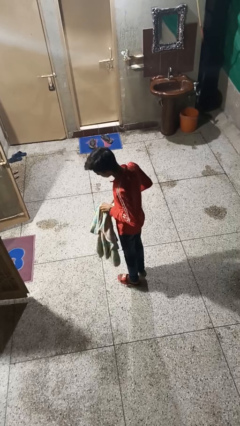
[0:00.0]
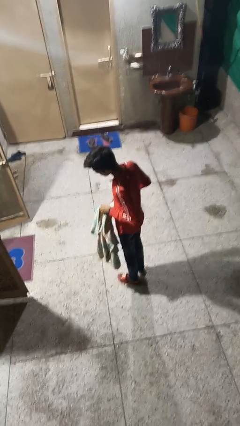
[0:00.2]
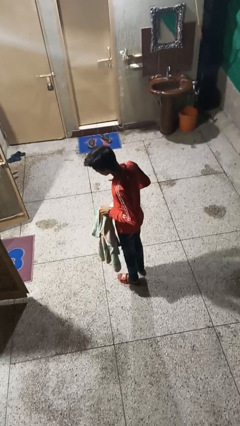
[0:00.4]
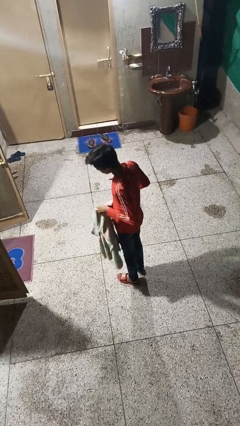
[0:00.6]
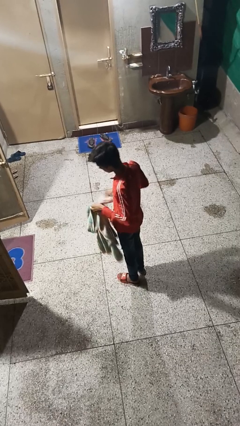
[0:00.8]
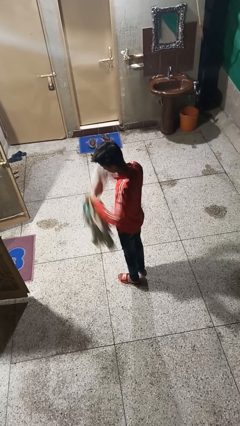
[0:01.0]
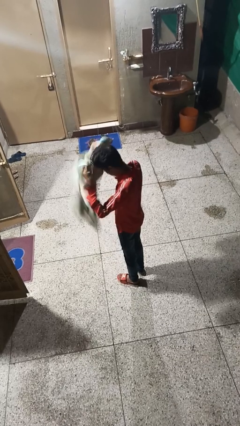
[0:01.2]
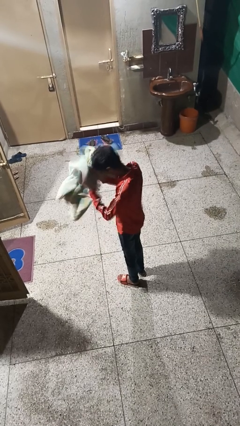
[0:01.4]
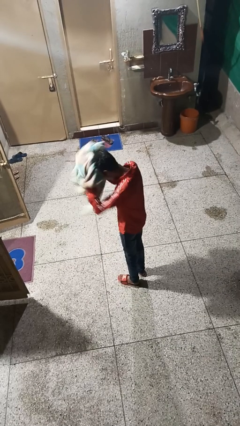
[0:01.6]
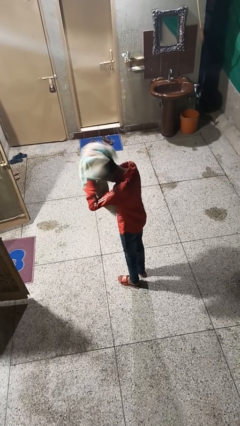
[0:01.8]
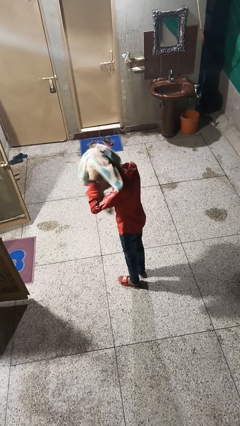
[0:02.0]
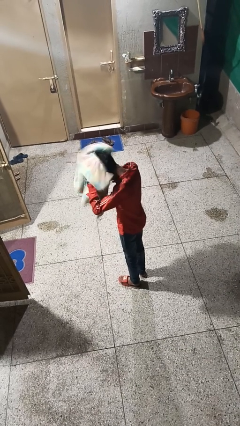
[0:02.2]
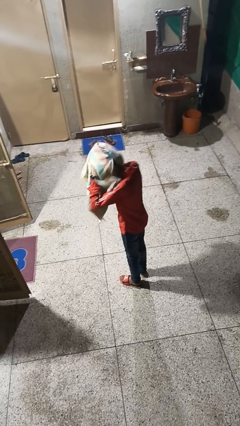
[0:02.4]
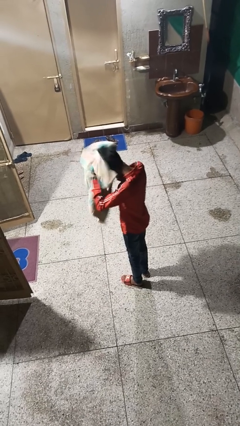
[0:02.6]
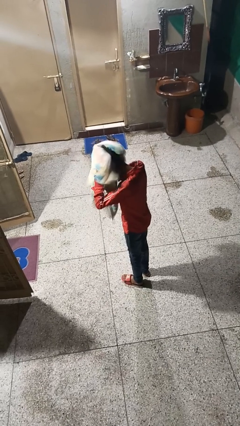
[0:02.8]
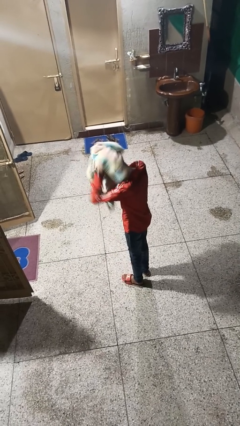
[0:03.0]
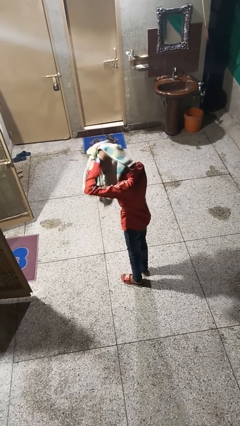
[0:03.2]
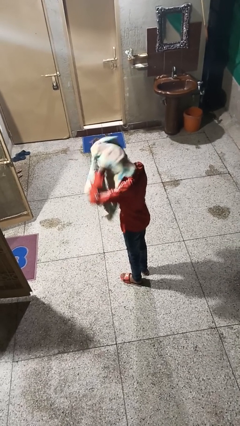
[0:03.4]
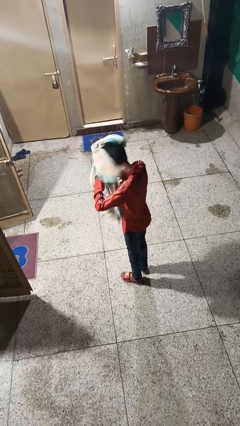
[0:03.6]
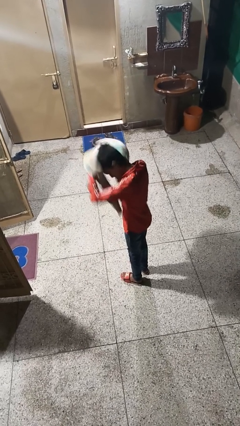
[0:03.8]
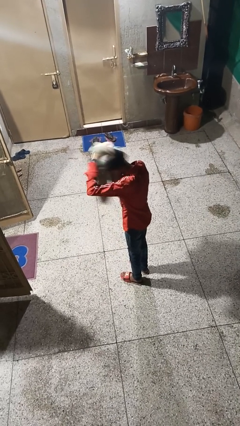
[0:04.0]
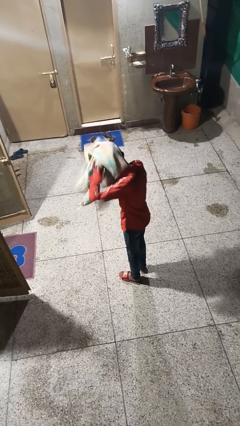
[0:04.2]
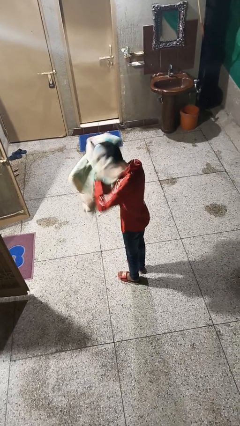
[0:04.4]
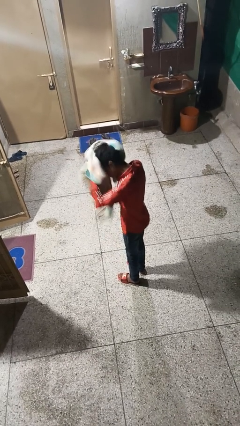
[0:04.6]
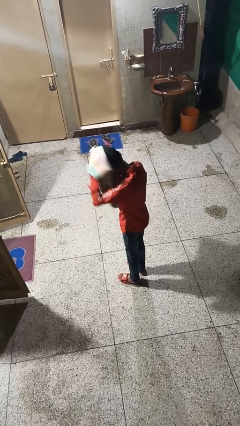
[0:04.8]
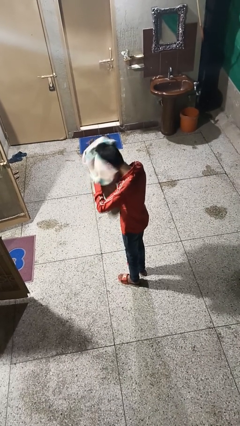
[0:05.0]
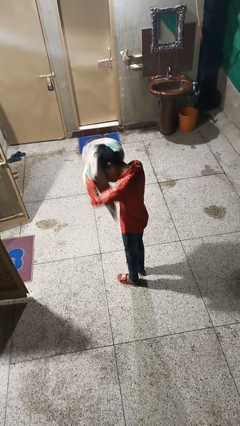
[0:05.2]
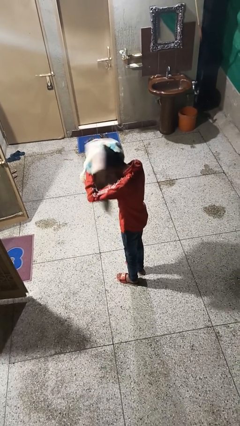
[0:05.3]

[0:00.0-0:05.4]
person dries hair with towel

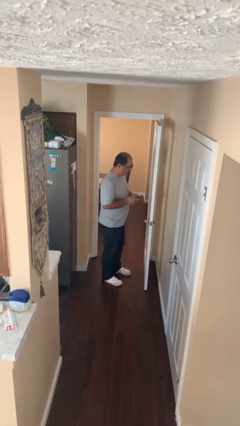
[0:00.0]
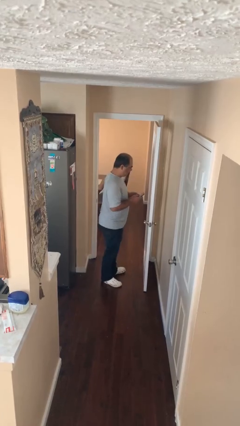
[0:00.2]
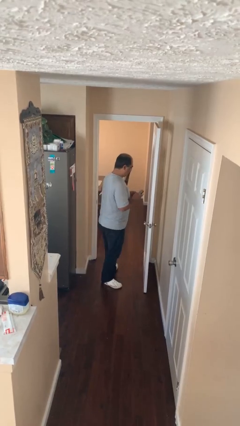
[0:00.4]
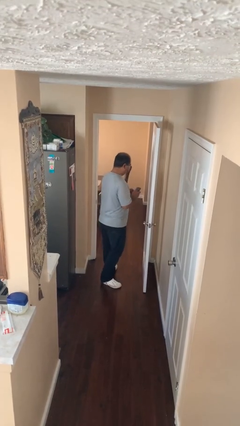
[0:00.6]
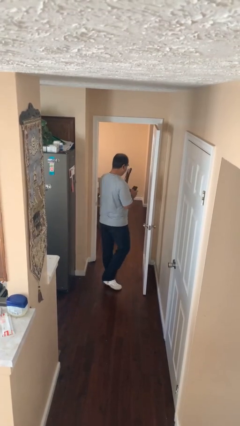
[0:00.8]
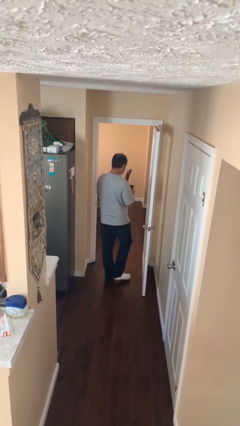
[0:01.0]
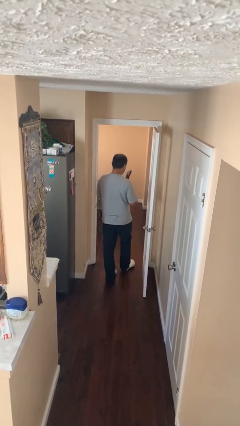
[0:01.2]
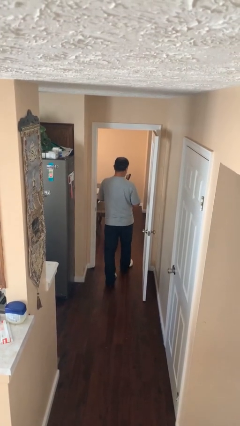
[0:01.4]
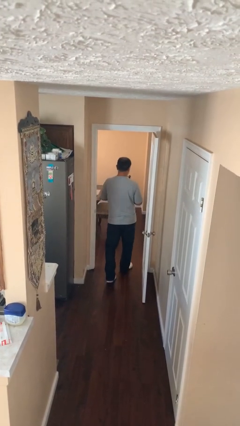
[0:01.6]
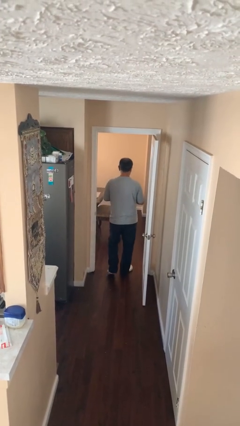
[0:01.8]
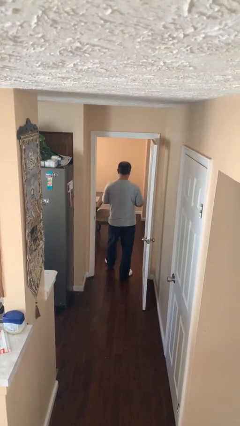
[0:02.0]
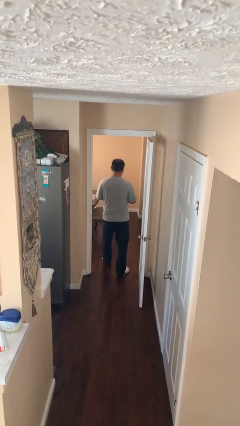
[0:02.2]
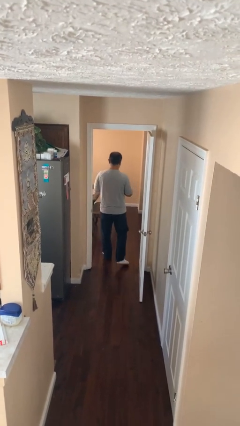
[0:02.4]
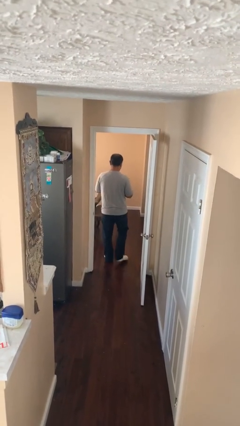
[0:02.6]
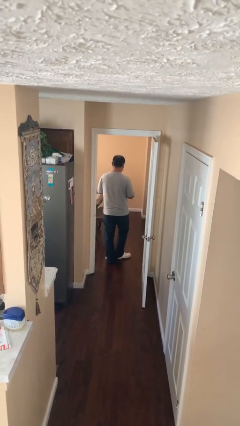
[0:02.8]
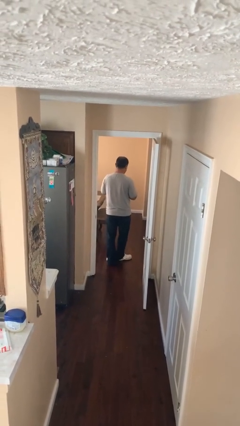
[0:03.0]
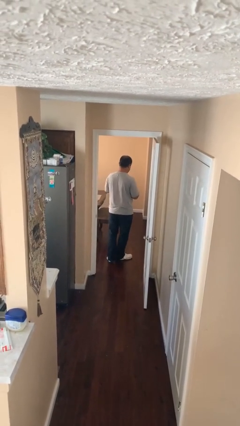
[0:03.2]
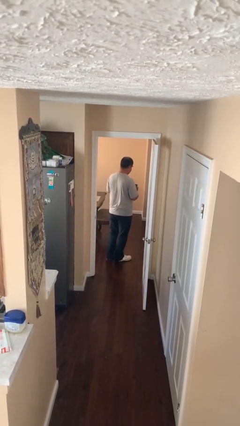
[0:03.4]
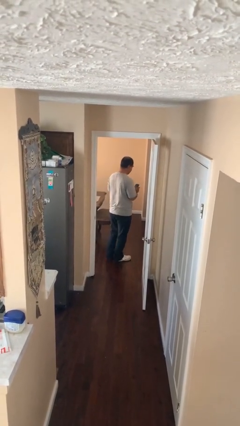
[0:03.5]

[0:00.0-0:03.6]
person exits scene through structure

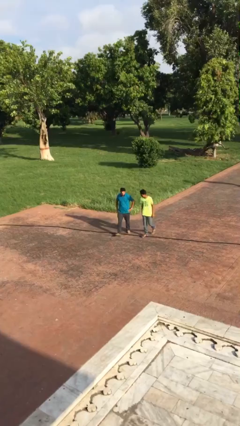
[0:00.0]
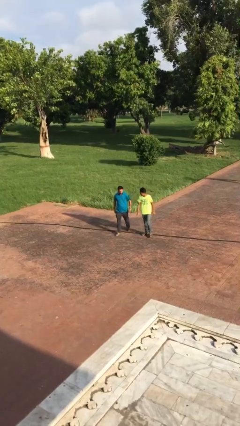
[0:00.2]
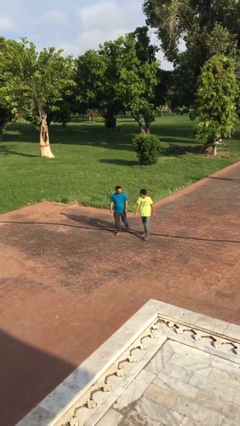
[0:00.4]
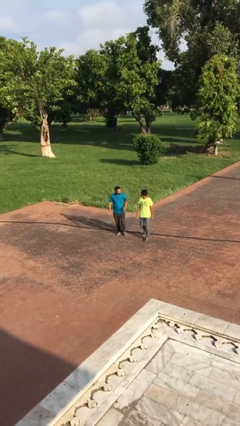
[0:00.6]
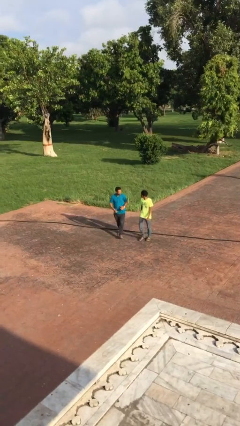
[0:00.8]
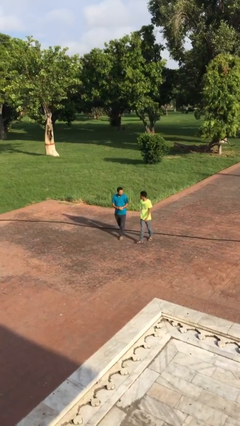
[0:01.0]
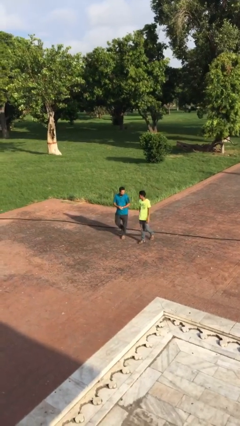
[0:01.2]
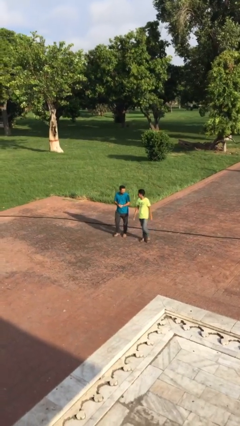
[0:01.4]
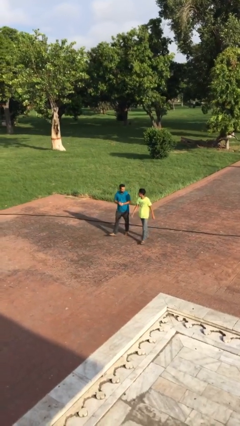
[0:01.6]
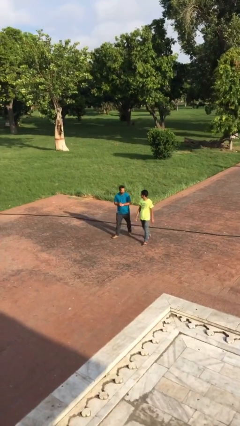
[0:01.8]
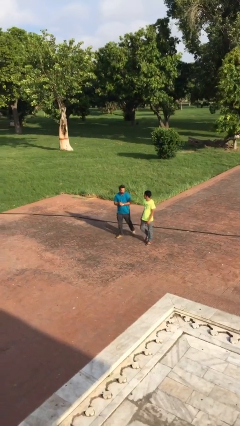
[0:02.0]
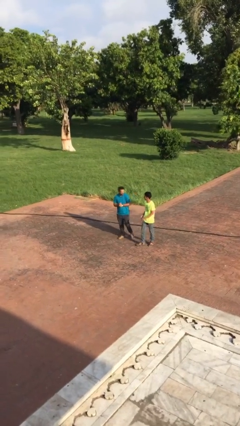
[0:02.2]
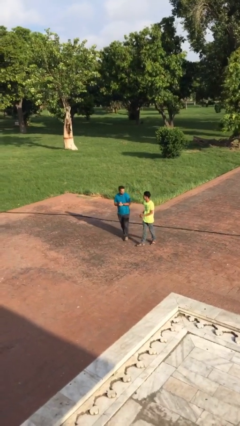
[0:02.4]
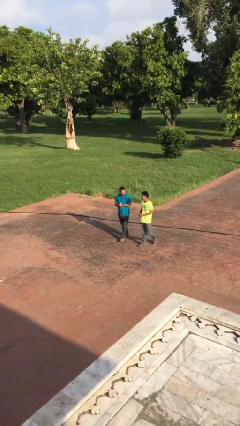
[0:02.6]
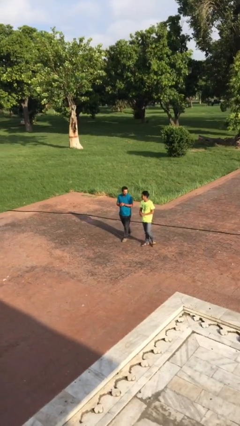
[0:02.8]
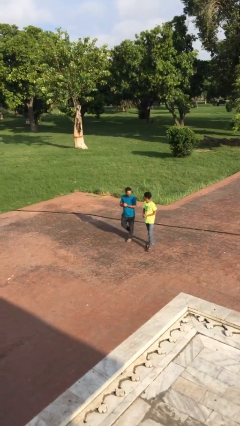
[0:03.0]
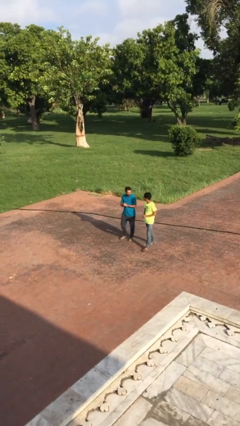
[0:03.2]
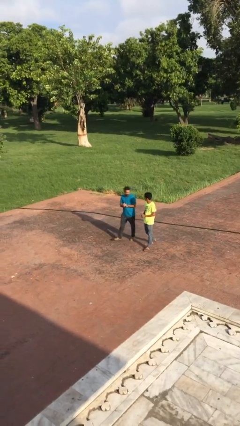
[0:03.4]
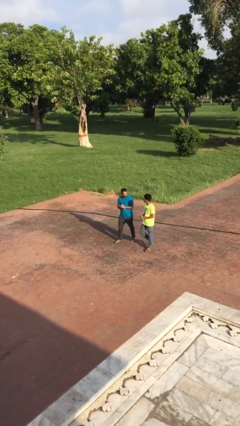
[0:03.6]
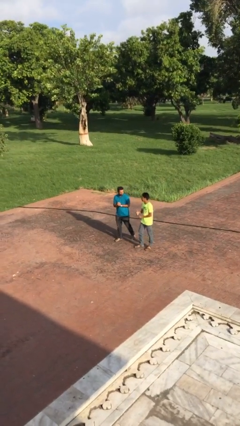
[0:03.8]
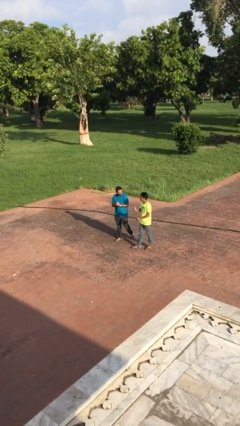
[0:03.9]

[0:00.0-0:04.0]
person talks to person

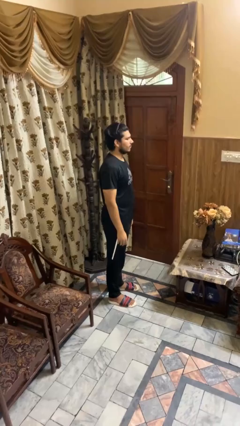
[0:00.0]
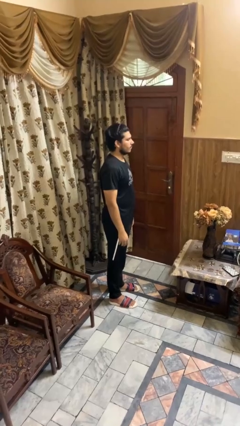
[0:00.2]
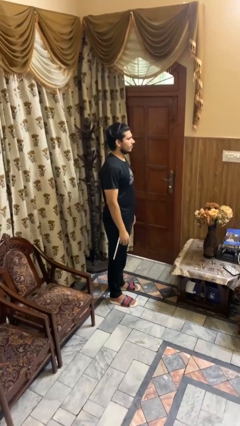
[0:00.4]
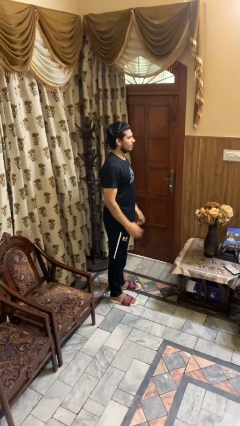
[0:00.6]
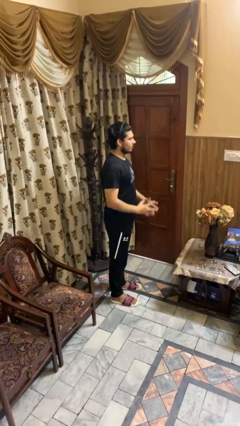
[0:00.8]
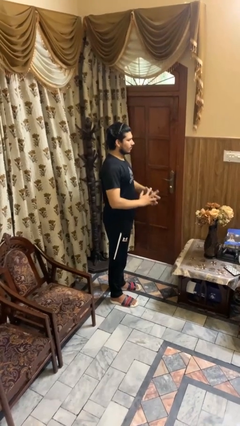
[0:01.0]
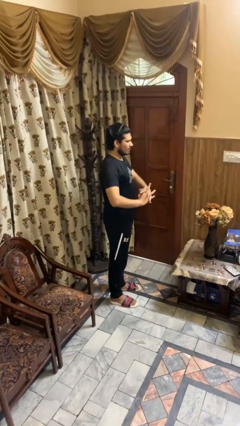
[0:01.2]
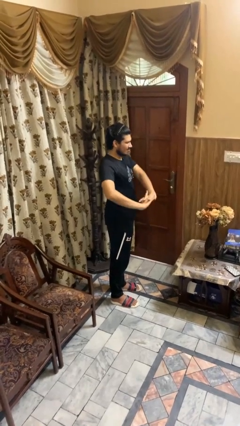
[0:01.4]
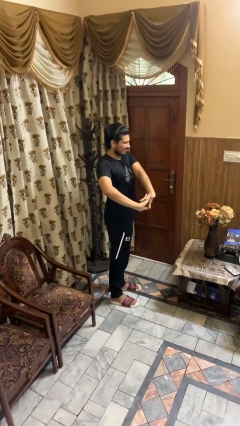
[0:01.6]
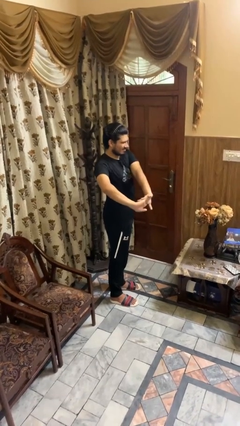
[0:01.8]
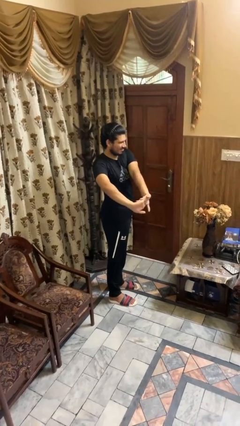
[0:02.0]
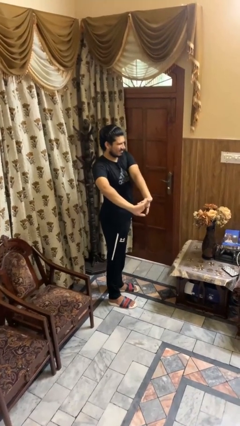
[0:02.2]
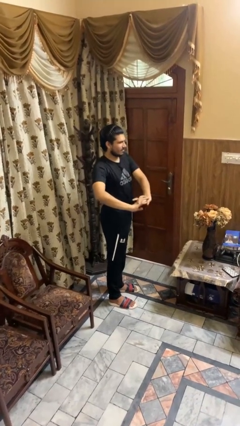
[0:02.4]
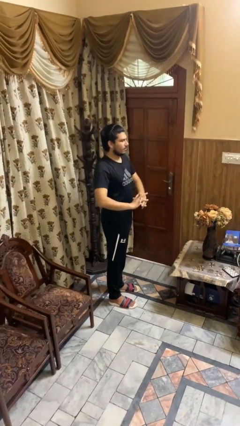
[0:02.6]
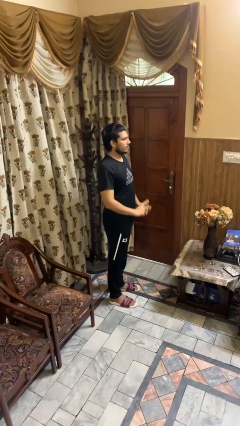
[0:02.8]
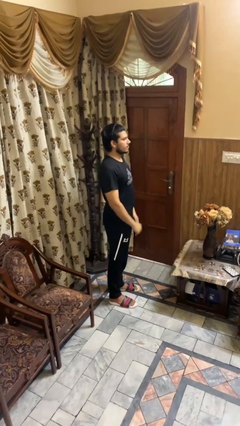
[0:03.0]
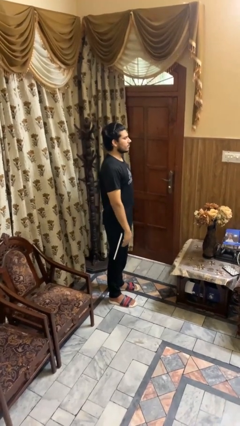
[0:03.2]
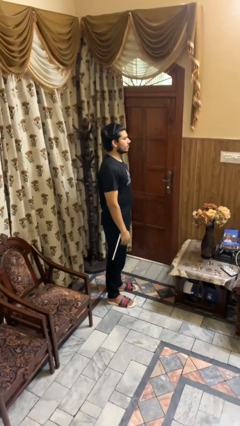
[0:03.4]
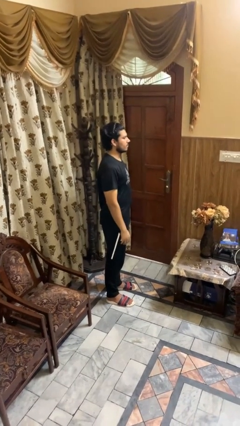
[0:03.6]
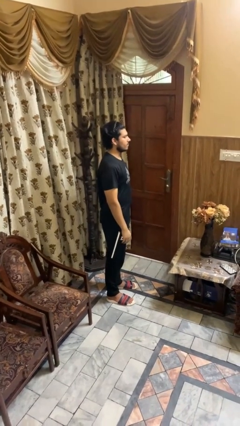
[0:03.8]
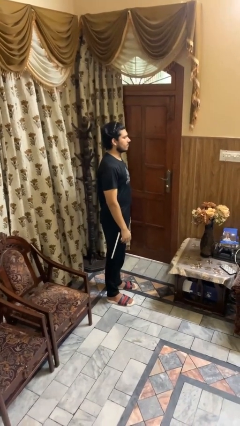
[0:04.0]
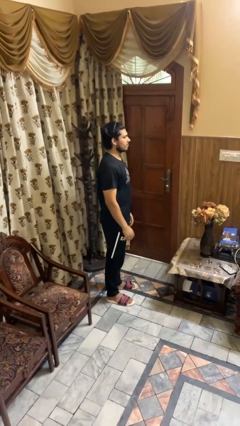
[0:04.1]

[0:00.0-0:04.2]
person stretches arms to side
